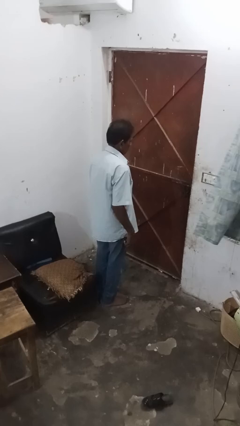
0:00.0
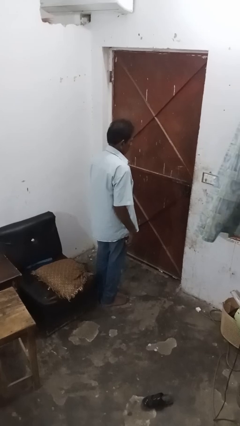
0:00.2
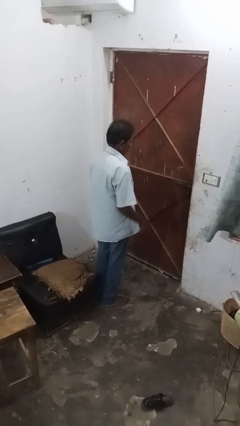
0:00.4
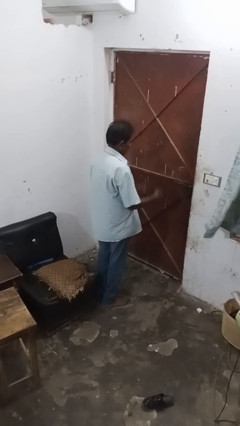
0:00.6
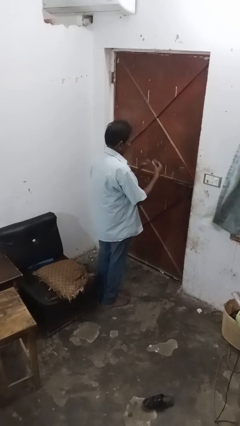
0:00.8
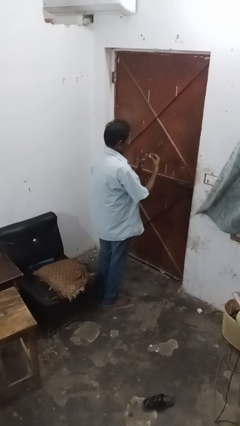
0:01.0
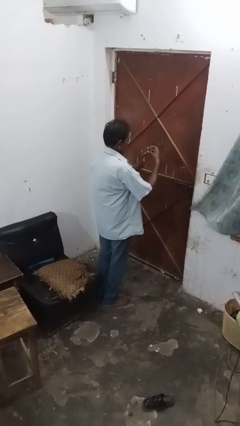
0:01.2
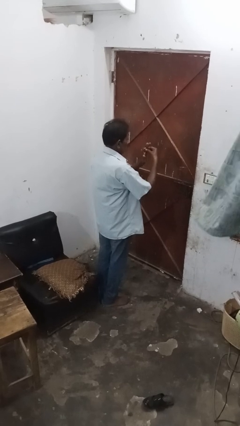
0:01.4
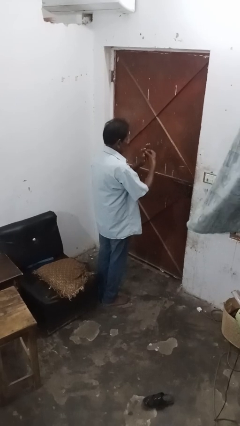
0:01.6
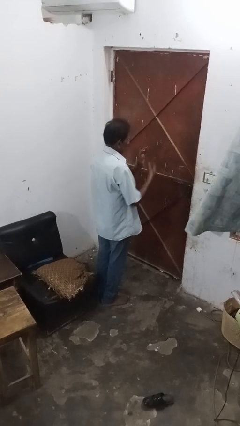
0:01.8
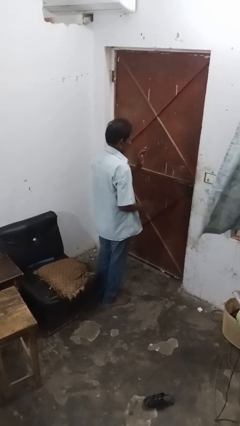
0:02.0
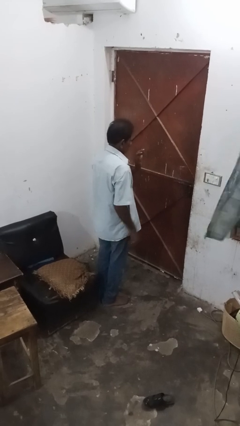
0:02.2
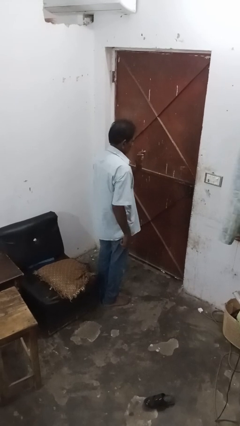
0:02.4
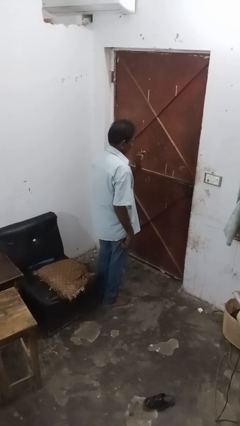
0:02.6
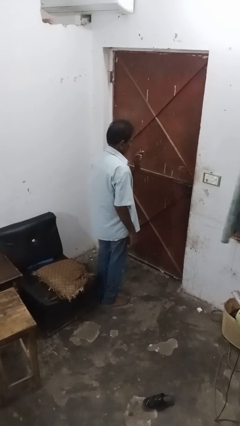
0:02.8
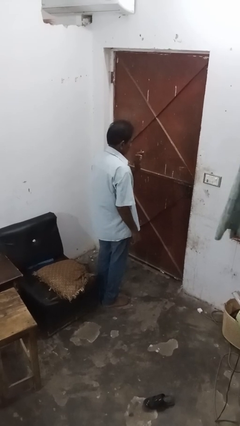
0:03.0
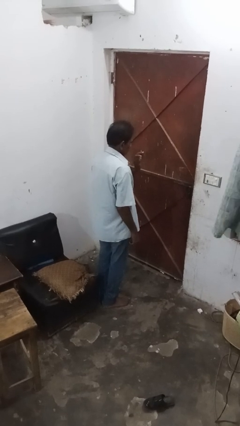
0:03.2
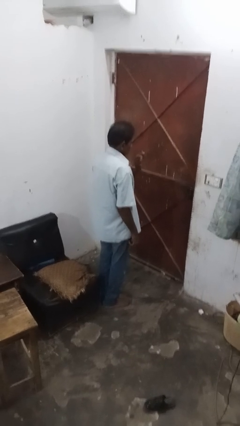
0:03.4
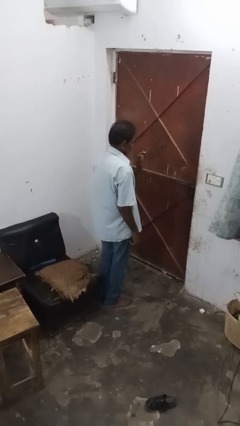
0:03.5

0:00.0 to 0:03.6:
person puts on ring

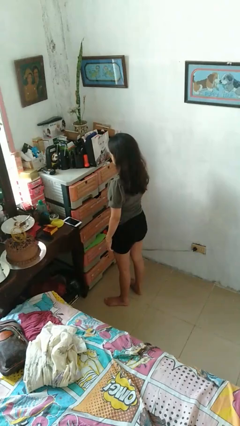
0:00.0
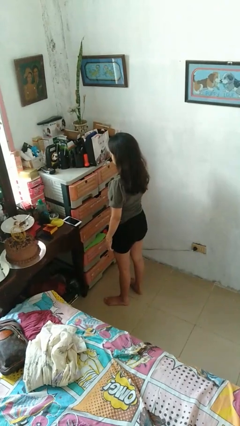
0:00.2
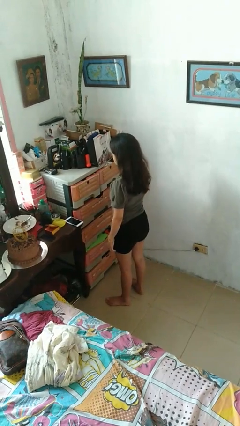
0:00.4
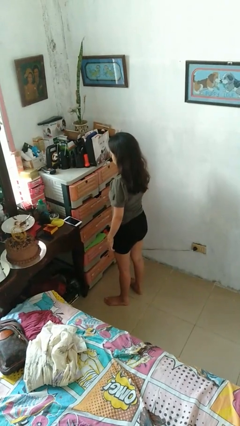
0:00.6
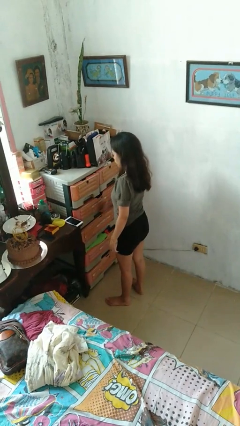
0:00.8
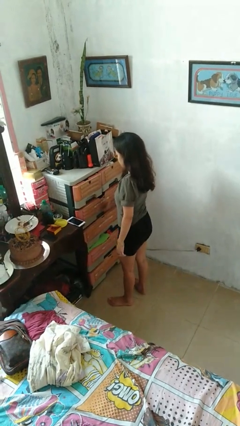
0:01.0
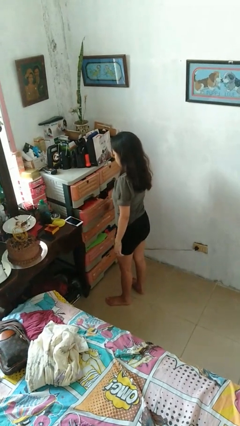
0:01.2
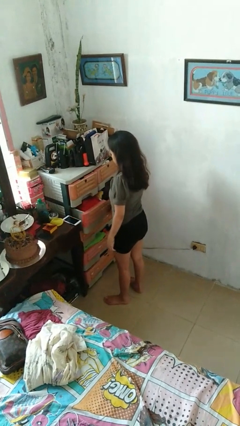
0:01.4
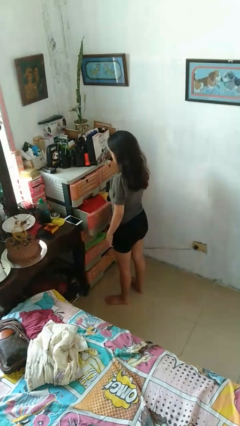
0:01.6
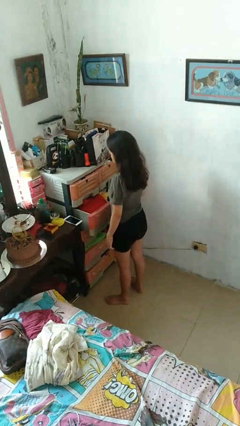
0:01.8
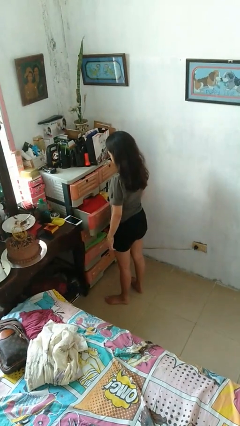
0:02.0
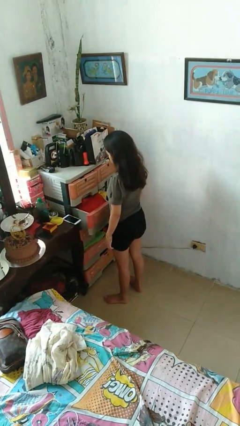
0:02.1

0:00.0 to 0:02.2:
person opens dresser drawer

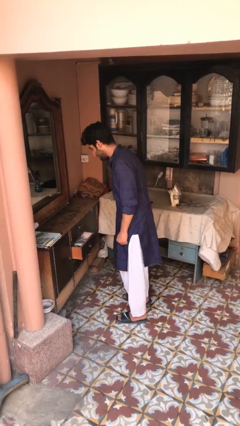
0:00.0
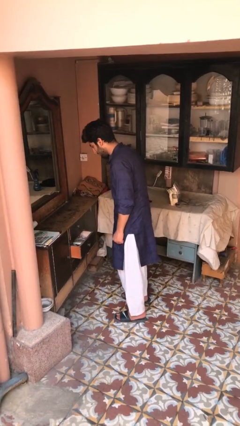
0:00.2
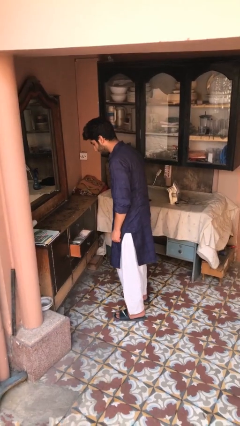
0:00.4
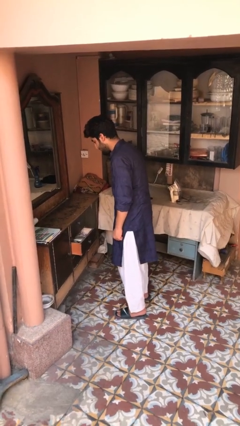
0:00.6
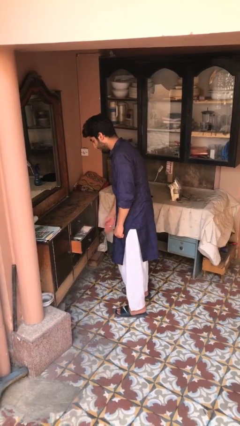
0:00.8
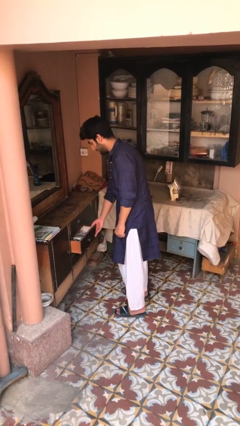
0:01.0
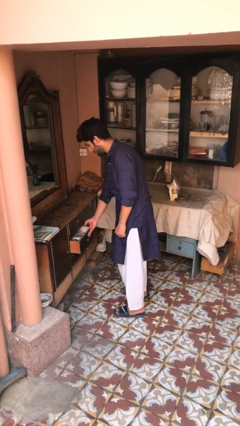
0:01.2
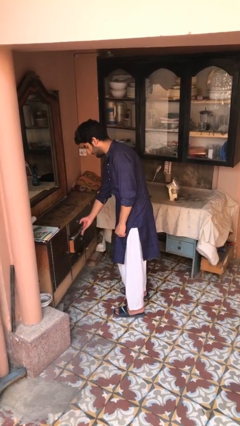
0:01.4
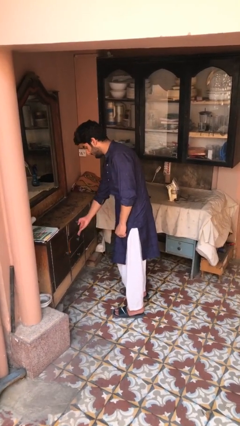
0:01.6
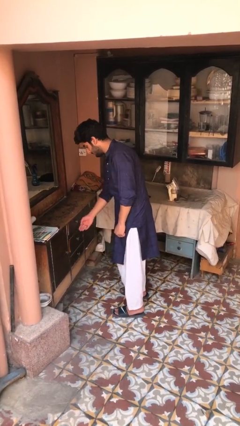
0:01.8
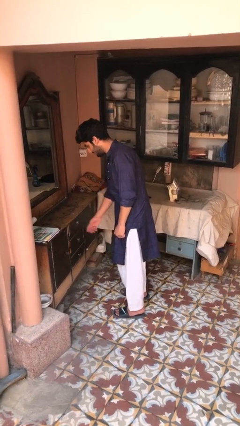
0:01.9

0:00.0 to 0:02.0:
person closes dresser drawer

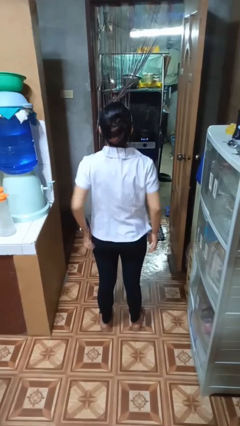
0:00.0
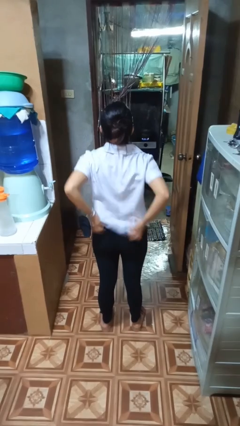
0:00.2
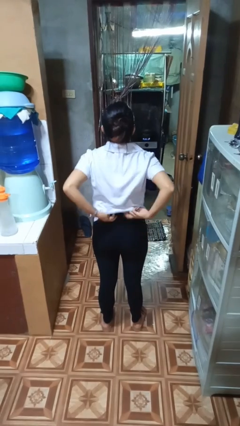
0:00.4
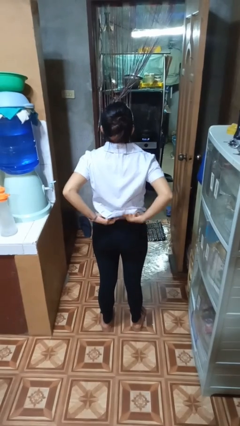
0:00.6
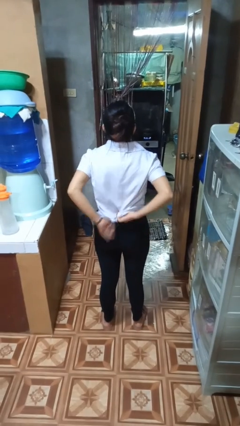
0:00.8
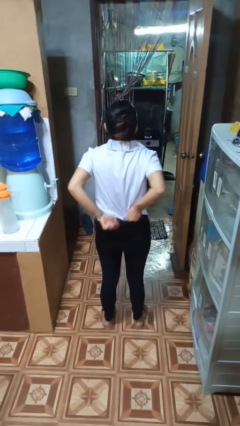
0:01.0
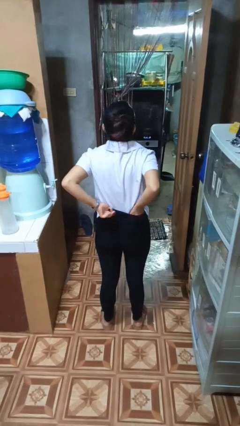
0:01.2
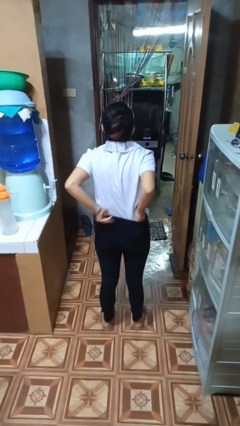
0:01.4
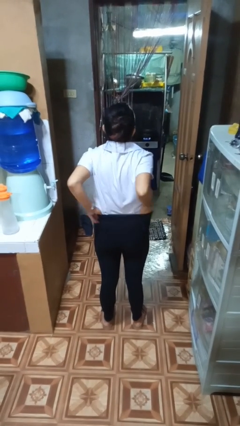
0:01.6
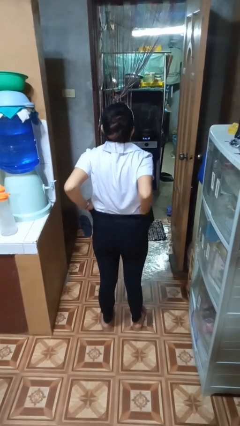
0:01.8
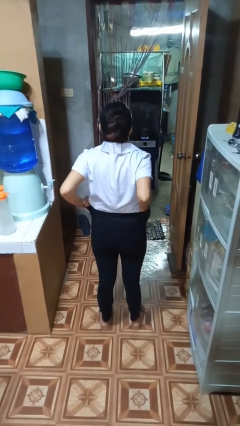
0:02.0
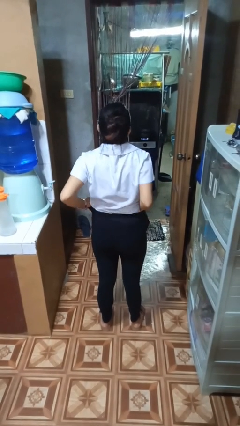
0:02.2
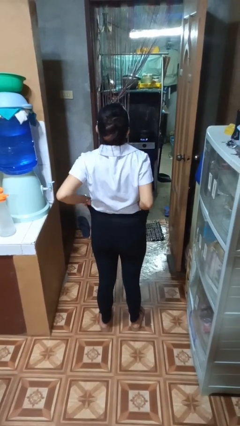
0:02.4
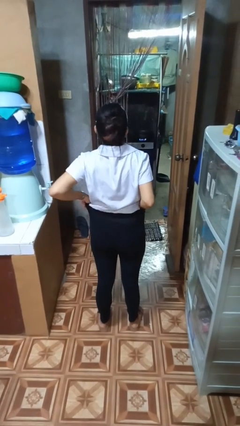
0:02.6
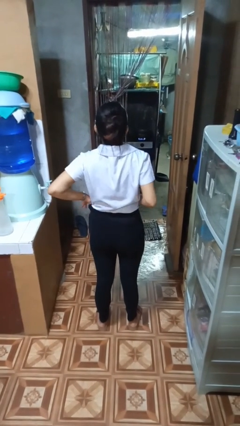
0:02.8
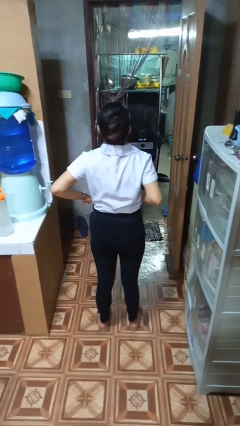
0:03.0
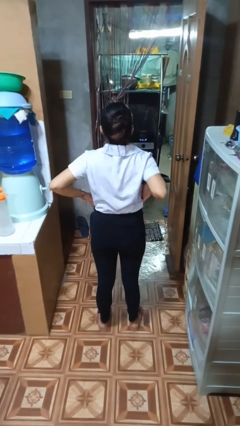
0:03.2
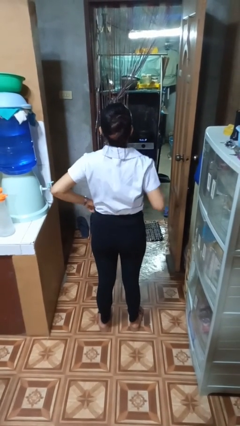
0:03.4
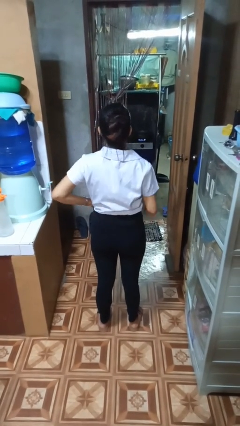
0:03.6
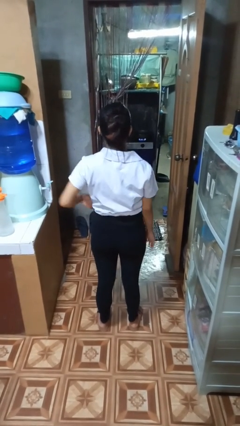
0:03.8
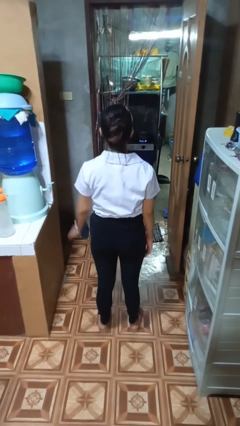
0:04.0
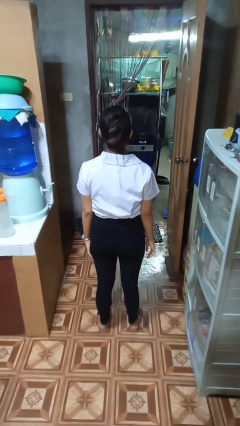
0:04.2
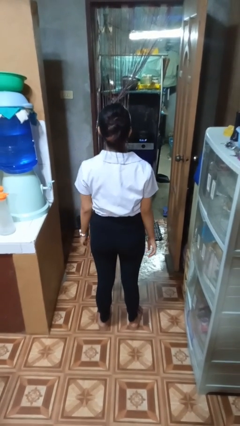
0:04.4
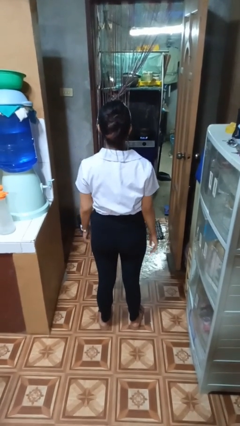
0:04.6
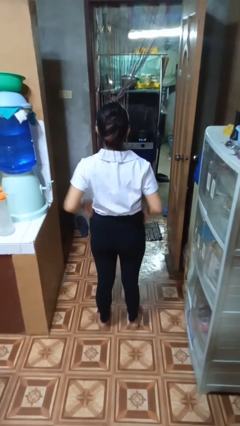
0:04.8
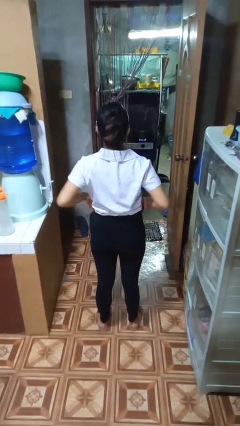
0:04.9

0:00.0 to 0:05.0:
person tucks in shirt

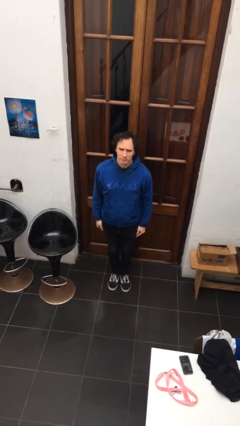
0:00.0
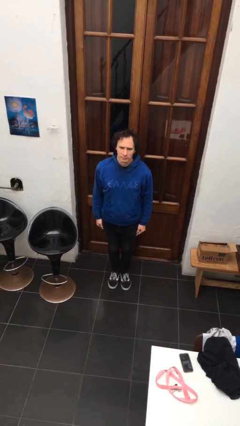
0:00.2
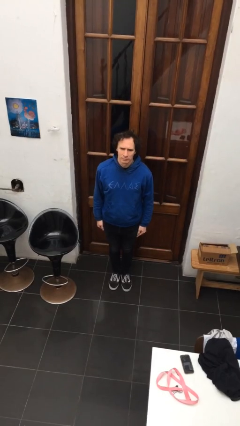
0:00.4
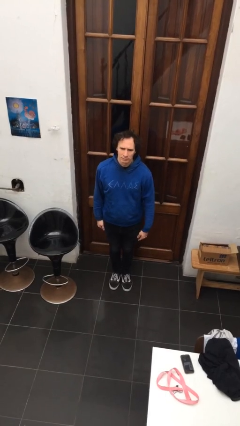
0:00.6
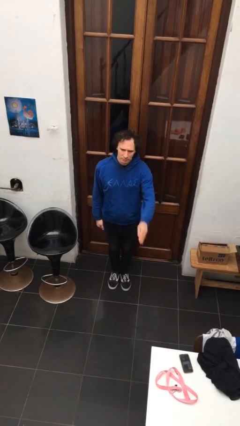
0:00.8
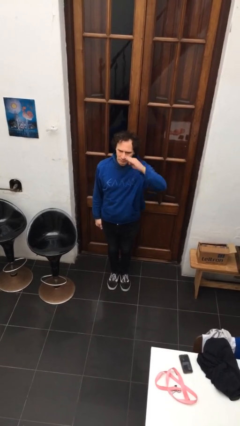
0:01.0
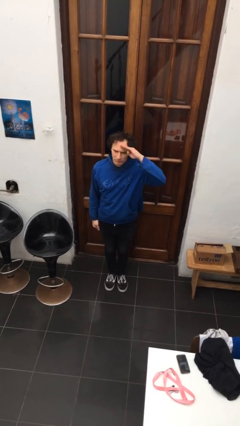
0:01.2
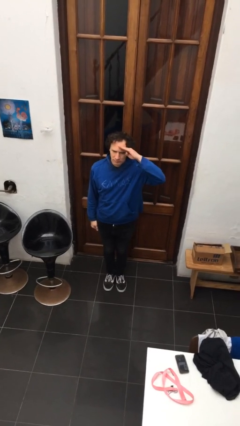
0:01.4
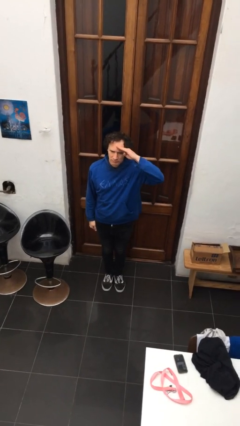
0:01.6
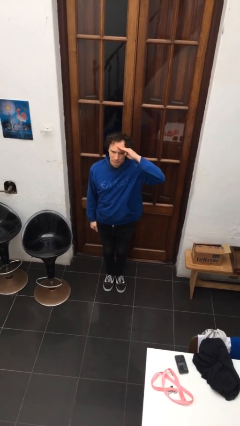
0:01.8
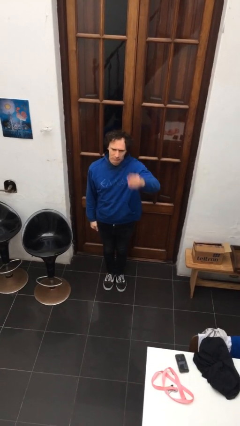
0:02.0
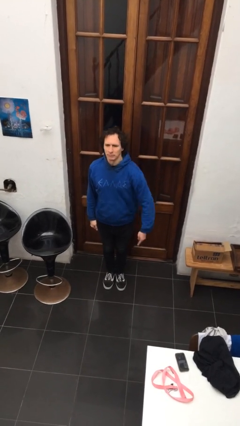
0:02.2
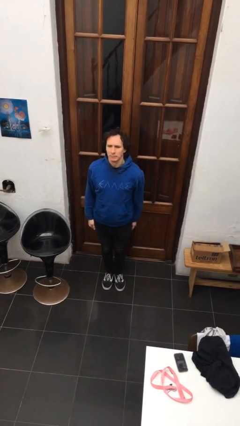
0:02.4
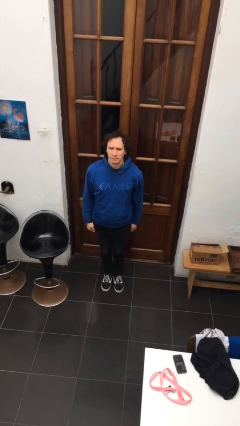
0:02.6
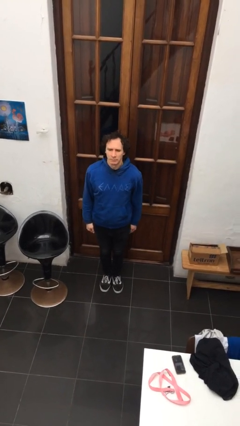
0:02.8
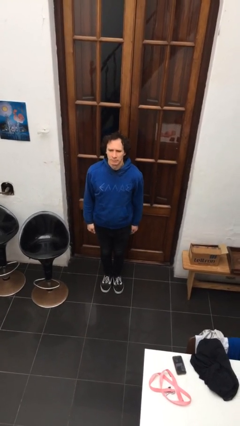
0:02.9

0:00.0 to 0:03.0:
person salutes

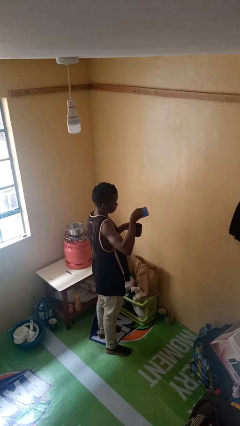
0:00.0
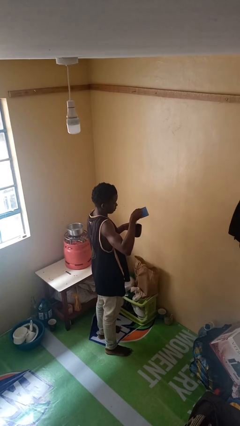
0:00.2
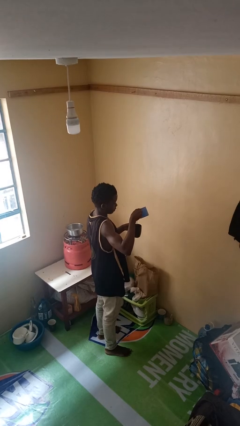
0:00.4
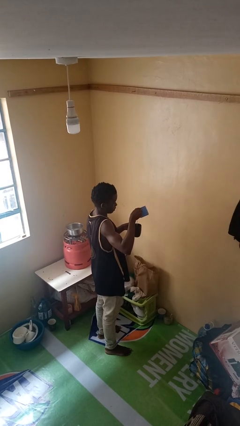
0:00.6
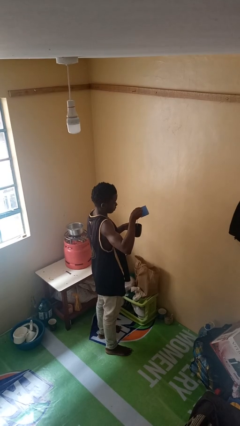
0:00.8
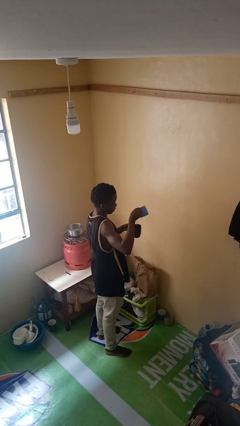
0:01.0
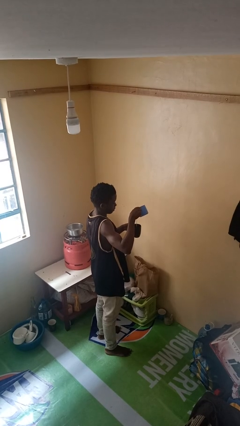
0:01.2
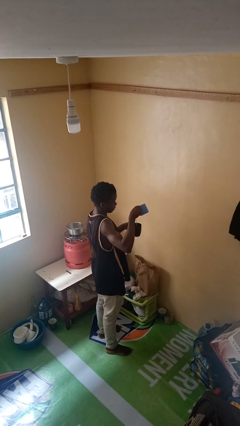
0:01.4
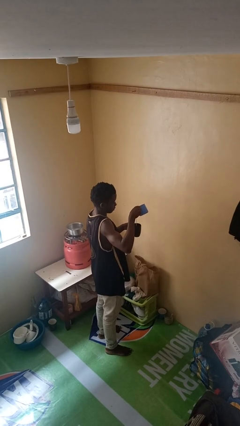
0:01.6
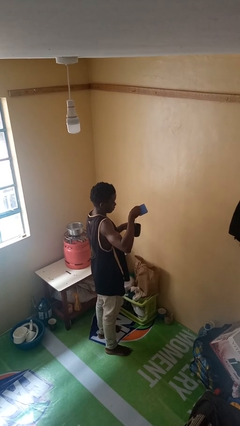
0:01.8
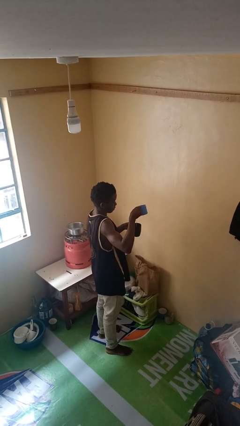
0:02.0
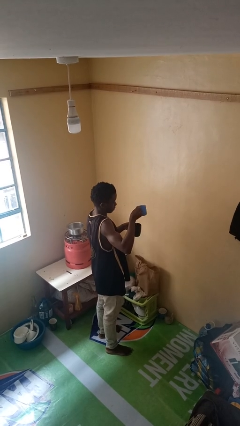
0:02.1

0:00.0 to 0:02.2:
person pours coffee into mug
